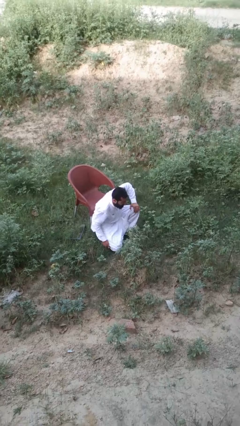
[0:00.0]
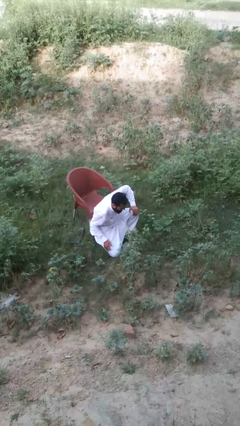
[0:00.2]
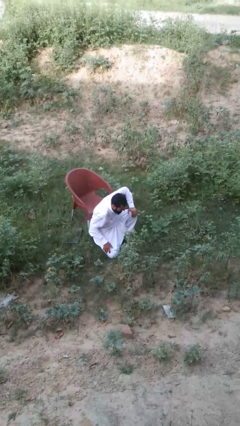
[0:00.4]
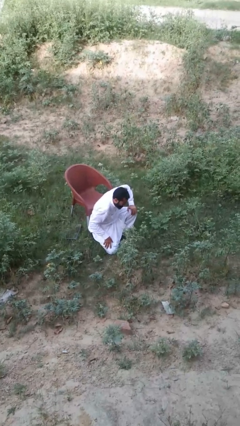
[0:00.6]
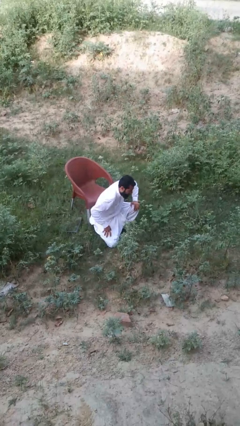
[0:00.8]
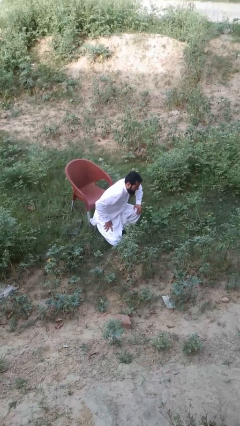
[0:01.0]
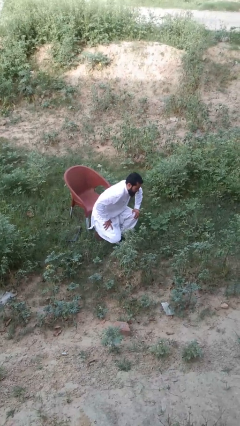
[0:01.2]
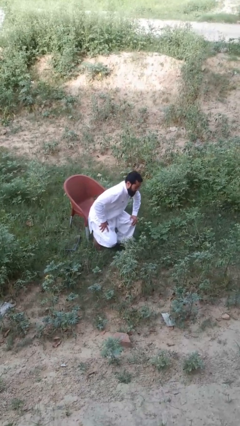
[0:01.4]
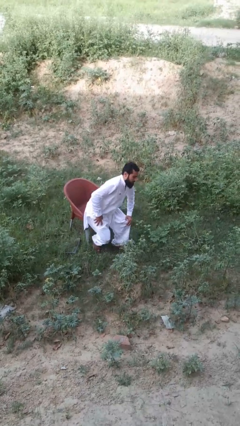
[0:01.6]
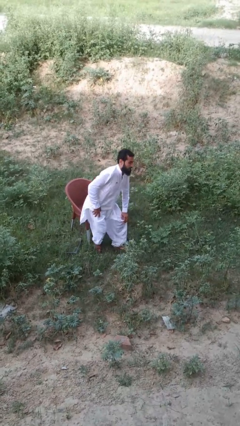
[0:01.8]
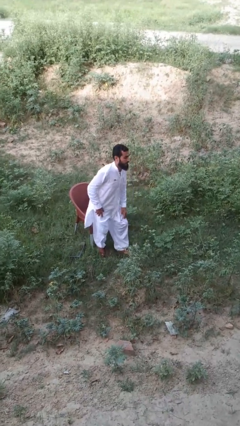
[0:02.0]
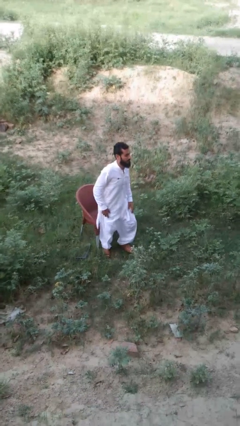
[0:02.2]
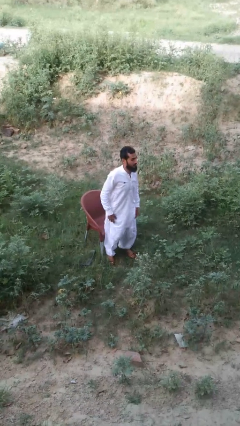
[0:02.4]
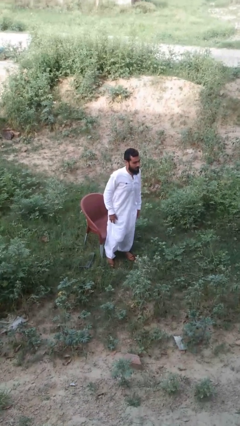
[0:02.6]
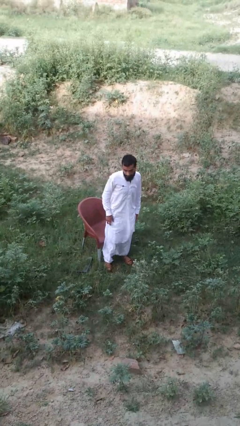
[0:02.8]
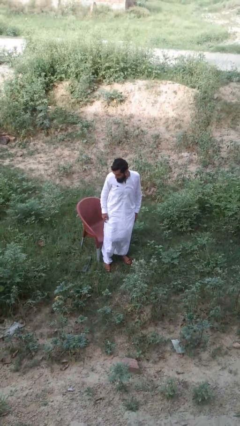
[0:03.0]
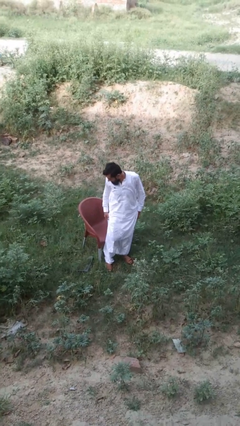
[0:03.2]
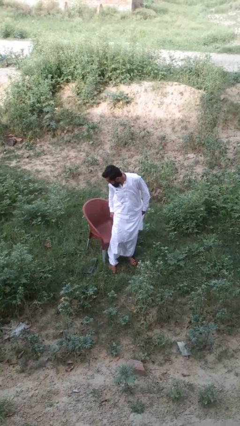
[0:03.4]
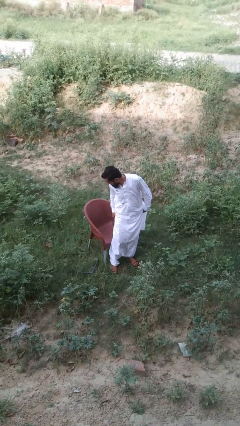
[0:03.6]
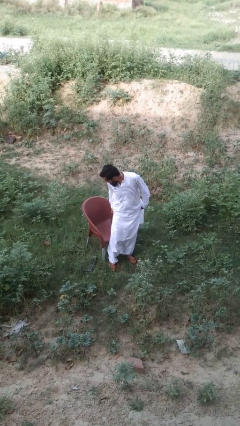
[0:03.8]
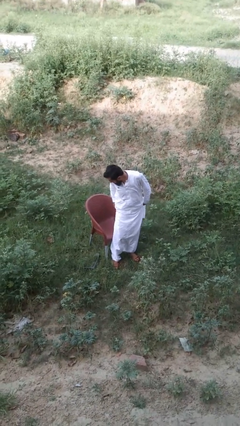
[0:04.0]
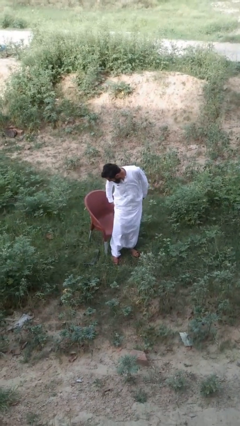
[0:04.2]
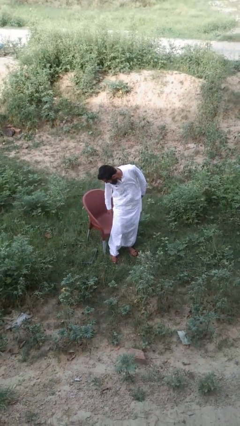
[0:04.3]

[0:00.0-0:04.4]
person stands up from floor

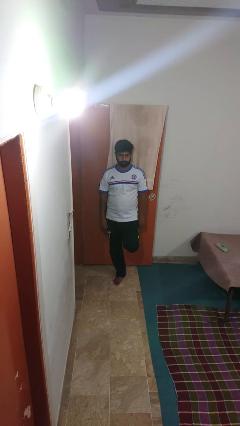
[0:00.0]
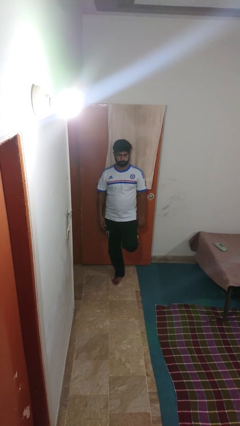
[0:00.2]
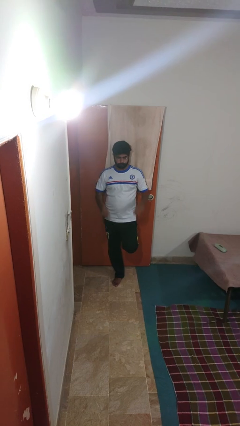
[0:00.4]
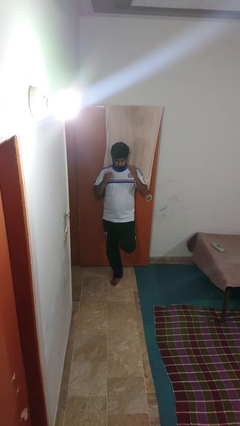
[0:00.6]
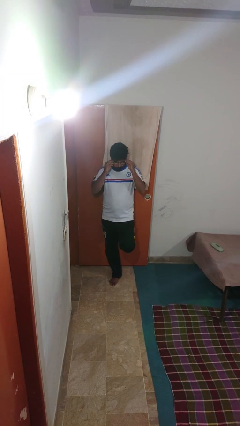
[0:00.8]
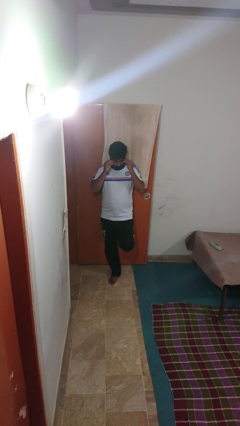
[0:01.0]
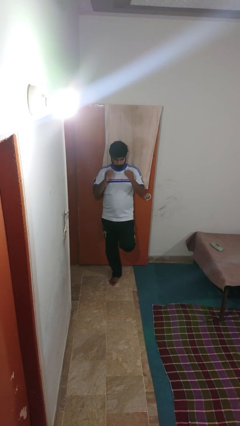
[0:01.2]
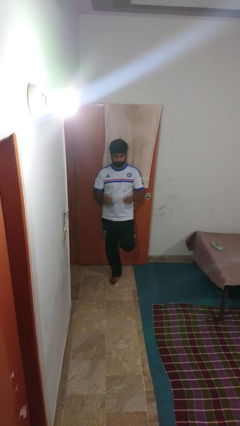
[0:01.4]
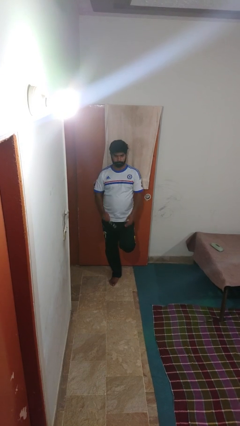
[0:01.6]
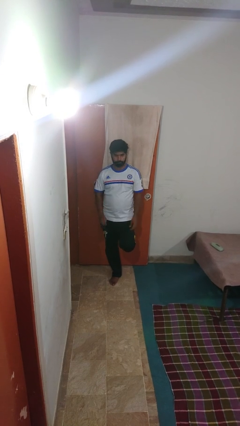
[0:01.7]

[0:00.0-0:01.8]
person takes off glasses

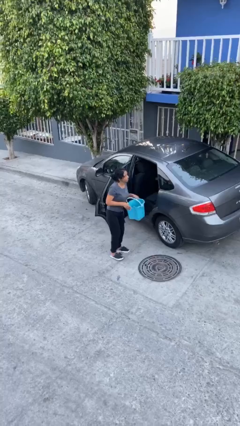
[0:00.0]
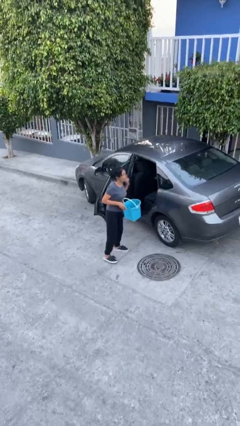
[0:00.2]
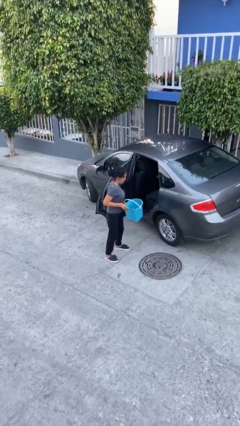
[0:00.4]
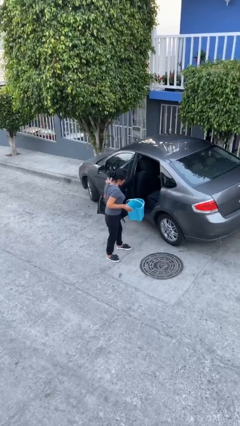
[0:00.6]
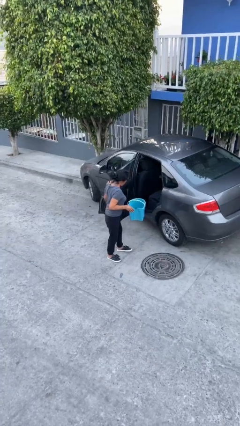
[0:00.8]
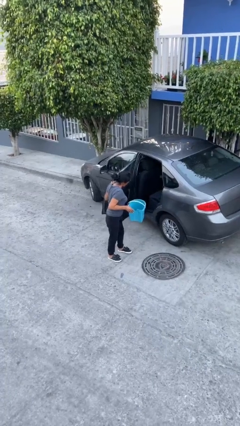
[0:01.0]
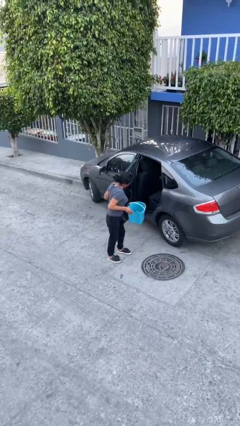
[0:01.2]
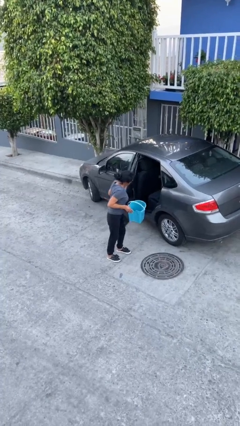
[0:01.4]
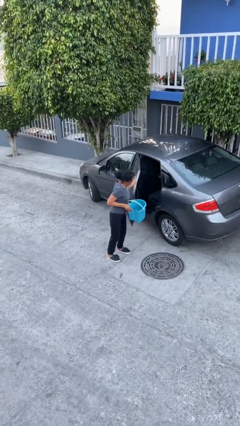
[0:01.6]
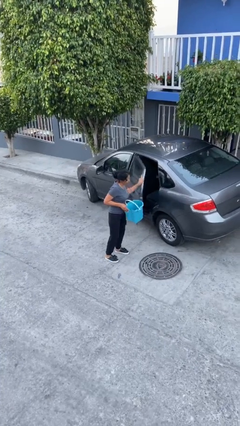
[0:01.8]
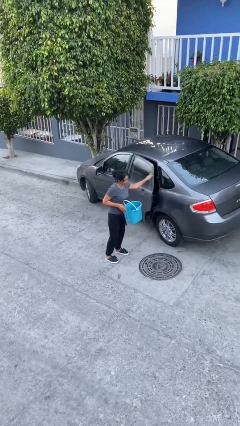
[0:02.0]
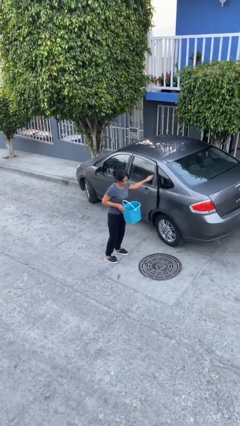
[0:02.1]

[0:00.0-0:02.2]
person closes car door

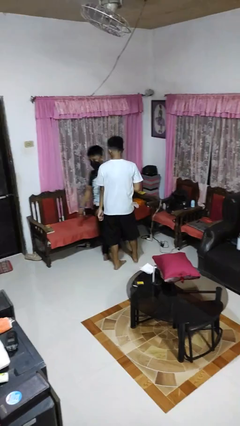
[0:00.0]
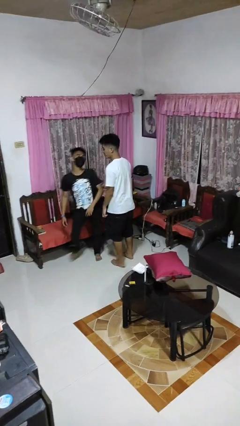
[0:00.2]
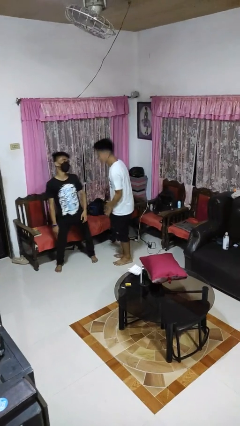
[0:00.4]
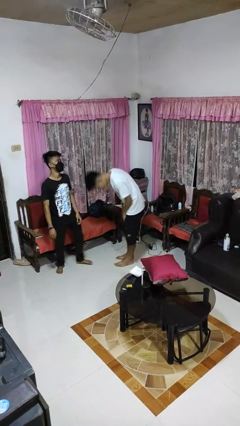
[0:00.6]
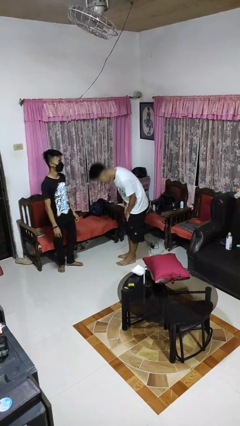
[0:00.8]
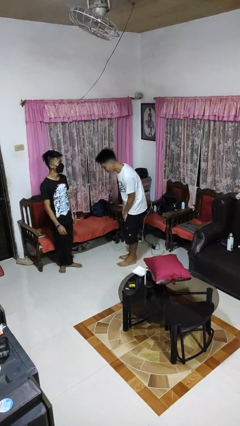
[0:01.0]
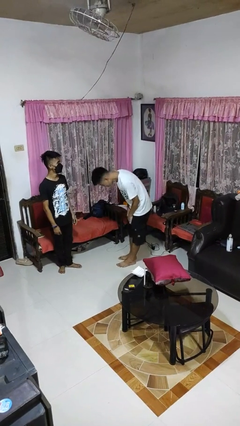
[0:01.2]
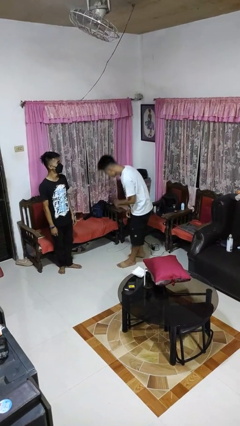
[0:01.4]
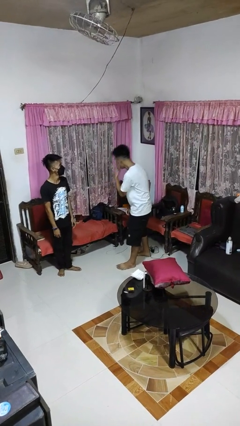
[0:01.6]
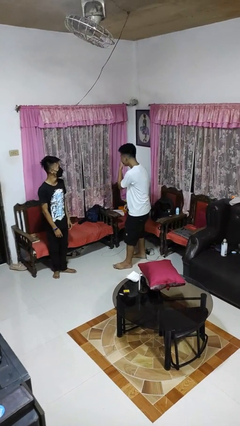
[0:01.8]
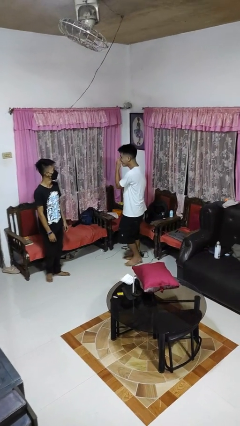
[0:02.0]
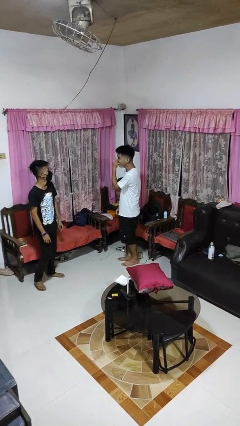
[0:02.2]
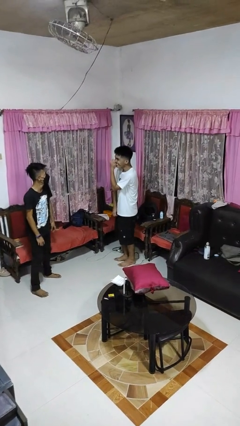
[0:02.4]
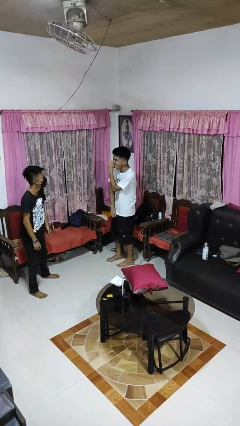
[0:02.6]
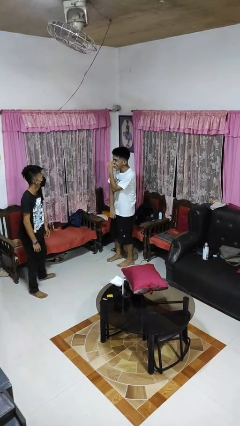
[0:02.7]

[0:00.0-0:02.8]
person bumps into person

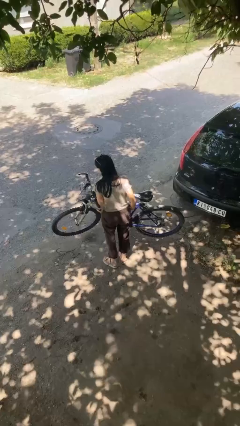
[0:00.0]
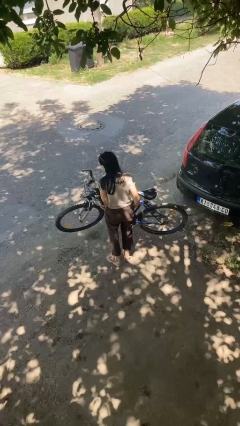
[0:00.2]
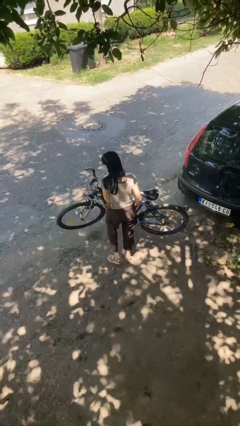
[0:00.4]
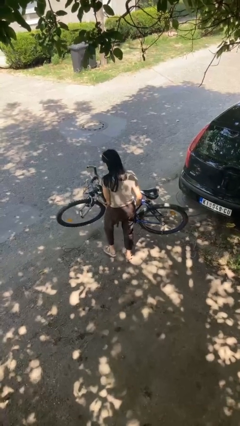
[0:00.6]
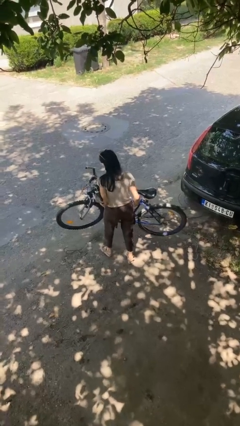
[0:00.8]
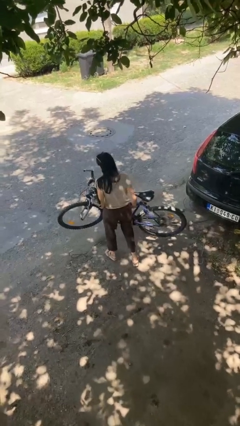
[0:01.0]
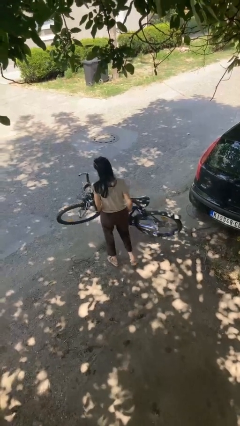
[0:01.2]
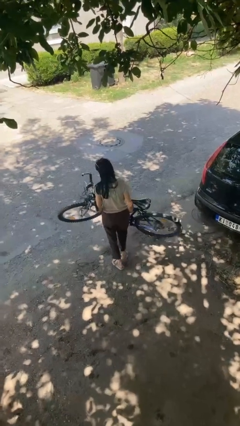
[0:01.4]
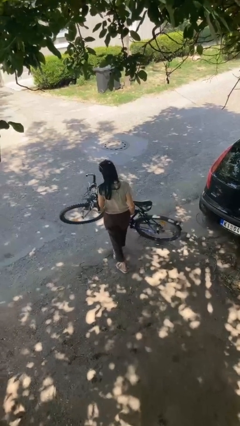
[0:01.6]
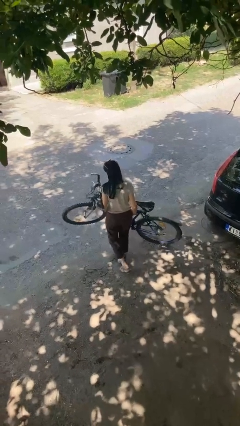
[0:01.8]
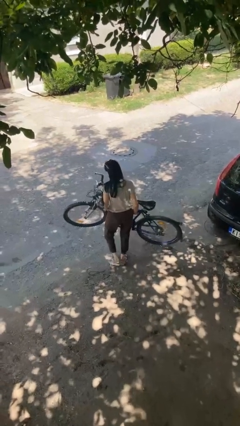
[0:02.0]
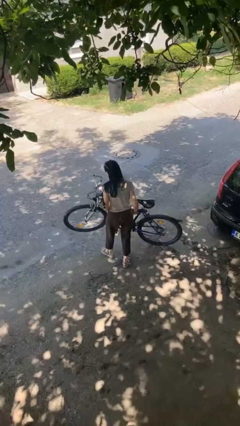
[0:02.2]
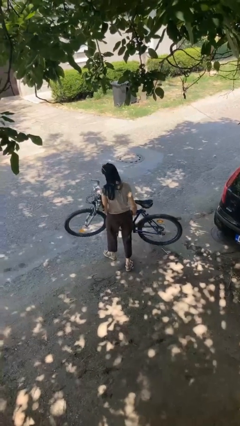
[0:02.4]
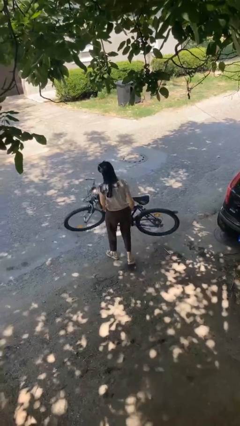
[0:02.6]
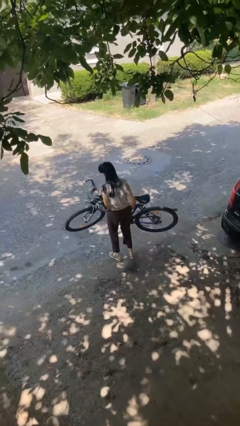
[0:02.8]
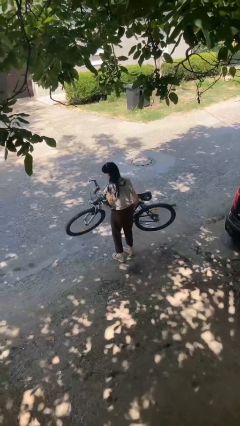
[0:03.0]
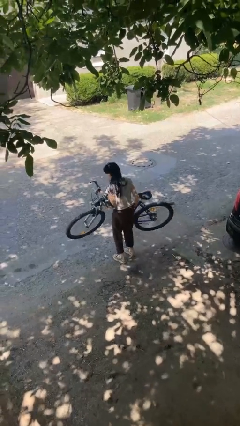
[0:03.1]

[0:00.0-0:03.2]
person carries bicycle

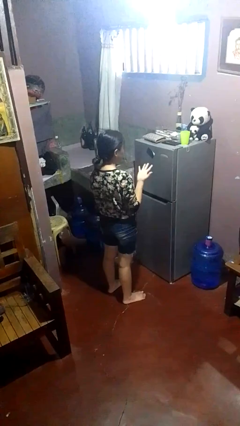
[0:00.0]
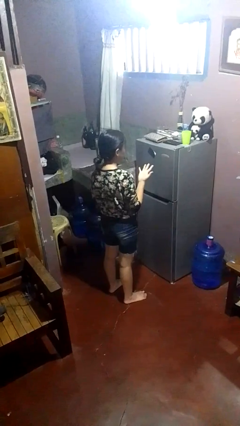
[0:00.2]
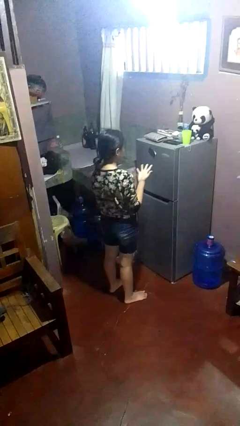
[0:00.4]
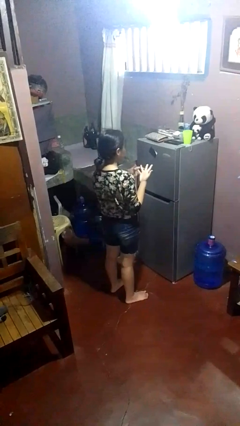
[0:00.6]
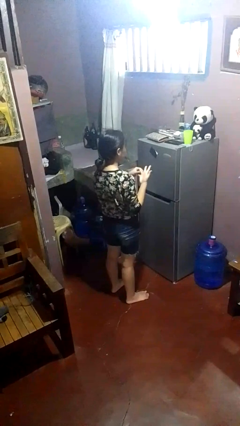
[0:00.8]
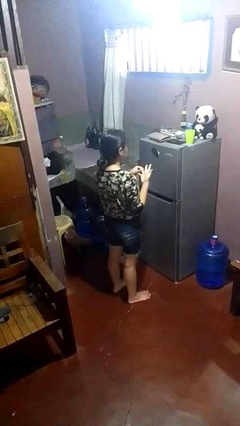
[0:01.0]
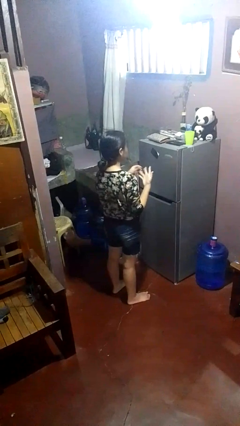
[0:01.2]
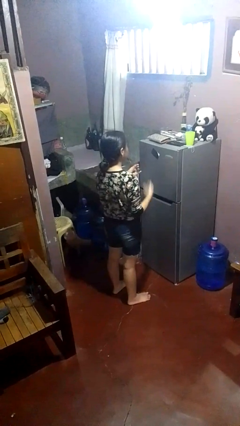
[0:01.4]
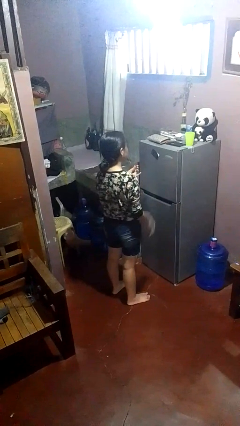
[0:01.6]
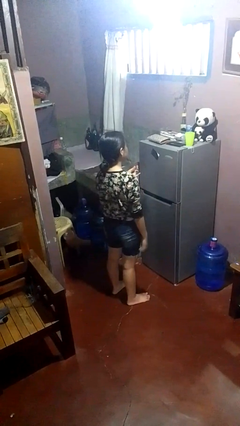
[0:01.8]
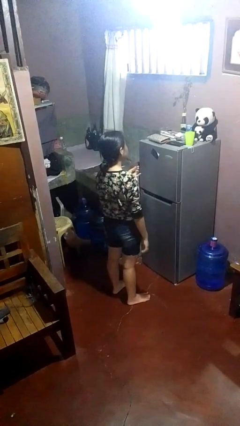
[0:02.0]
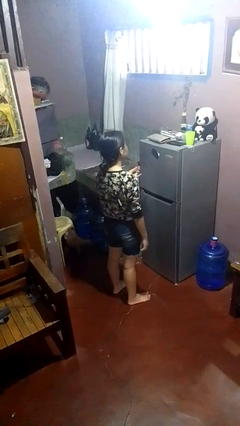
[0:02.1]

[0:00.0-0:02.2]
person takes off ring

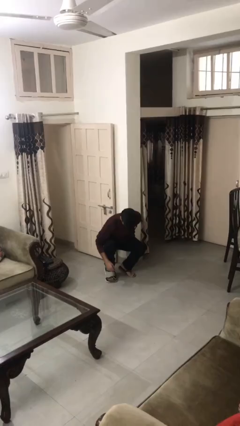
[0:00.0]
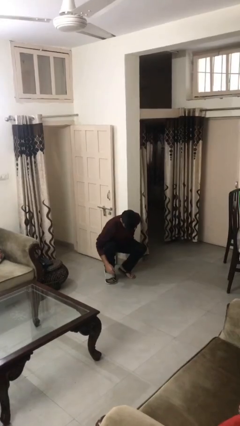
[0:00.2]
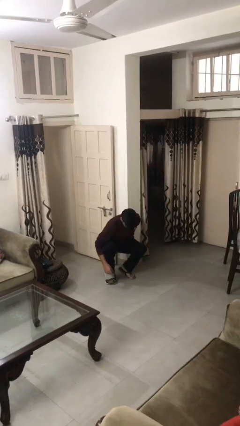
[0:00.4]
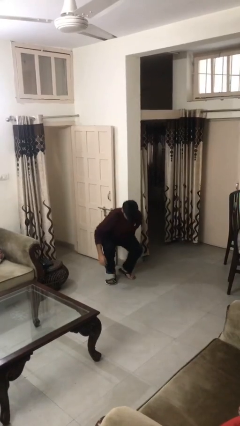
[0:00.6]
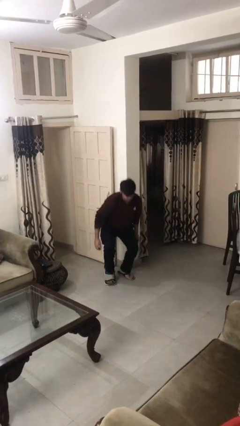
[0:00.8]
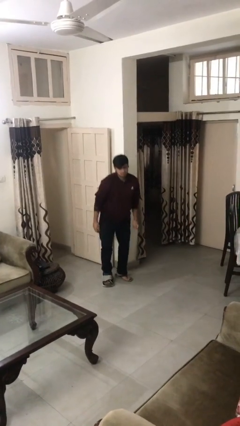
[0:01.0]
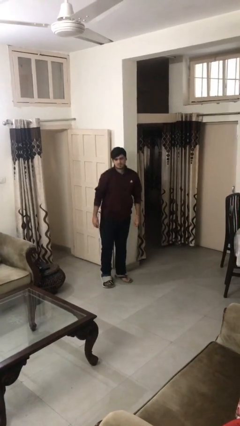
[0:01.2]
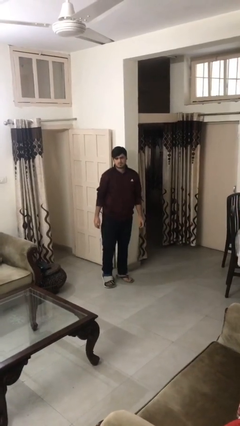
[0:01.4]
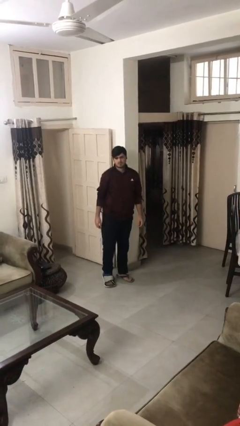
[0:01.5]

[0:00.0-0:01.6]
person stands up
